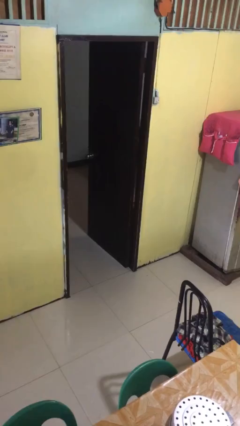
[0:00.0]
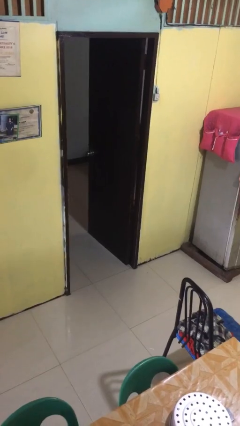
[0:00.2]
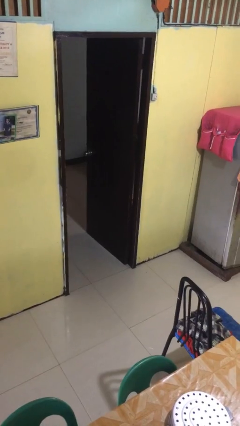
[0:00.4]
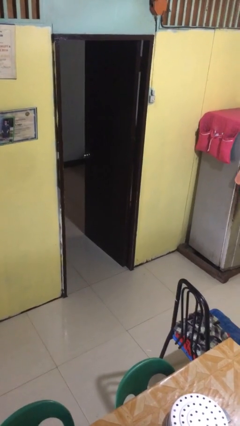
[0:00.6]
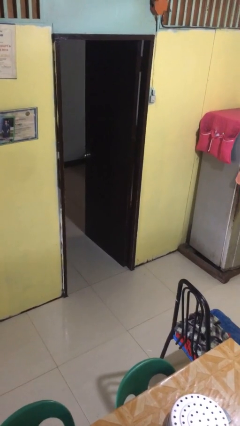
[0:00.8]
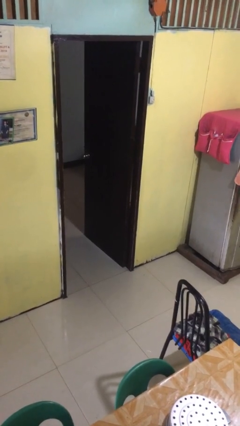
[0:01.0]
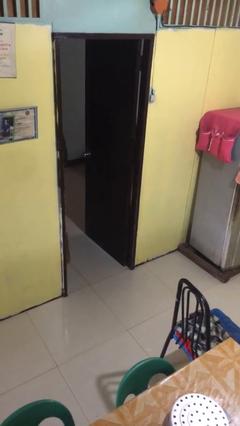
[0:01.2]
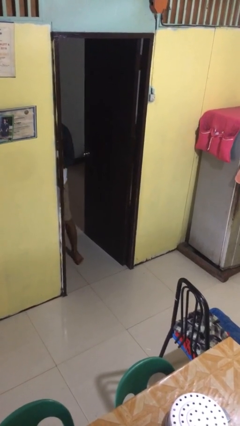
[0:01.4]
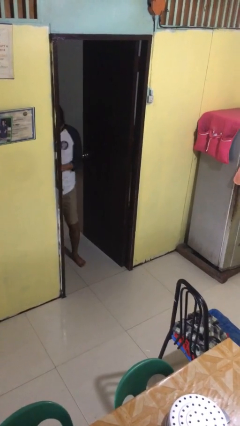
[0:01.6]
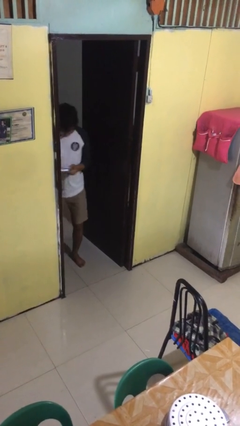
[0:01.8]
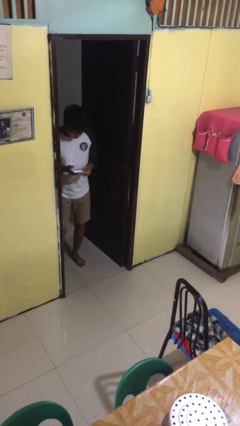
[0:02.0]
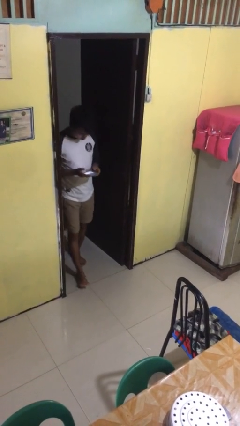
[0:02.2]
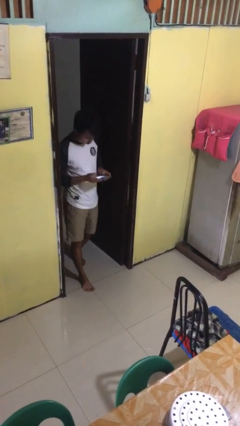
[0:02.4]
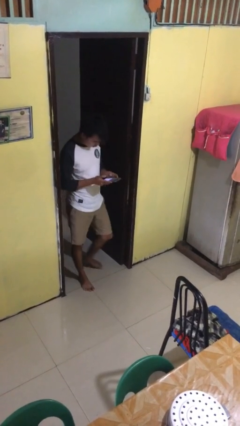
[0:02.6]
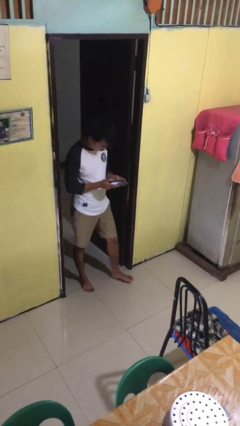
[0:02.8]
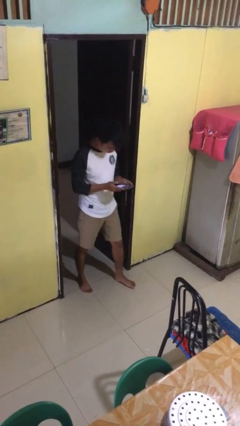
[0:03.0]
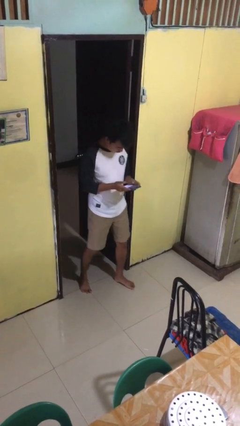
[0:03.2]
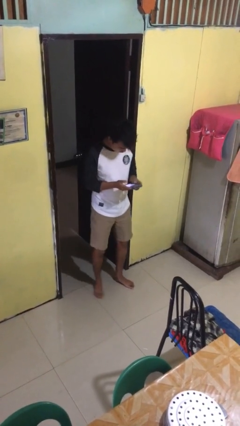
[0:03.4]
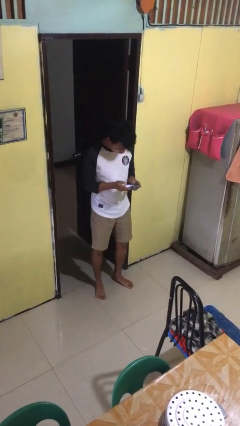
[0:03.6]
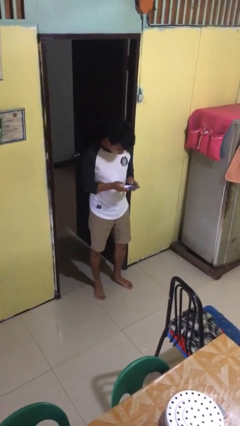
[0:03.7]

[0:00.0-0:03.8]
person enters scene through structure

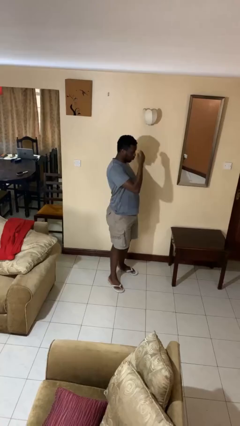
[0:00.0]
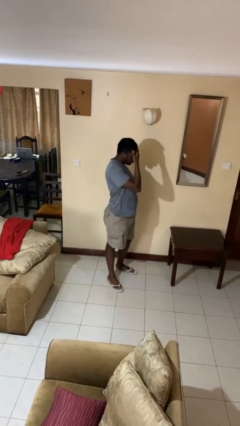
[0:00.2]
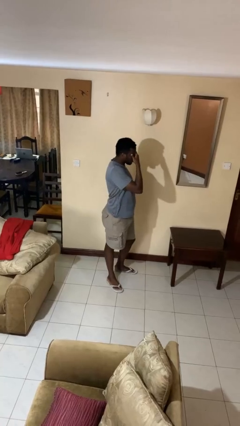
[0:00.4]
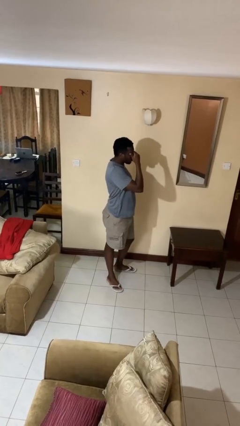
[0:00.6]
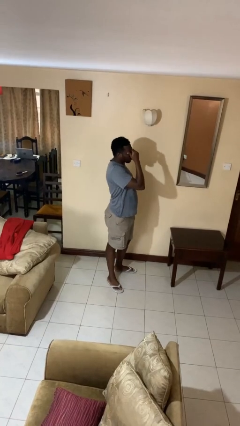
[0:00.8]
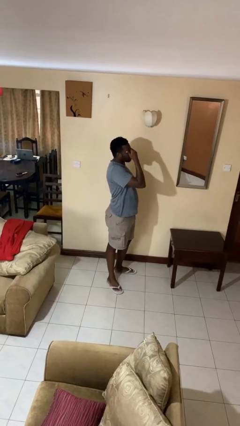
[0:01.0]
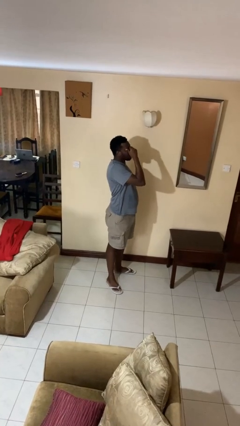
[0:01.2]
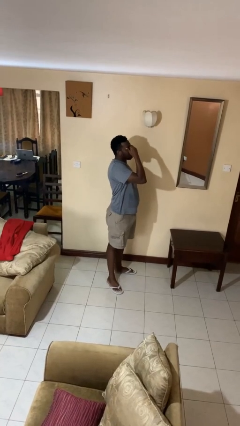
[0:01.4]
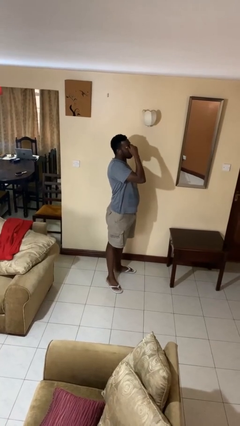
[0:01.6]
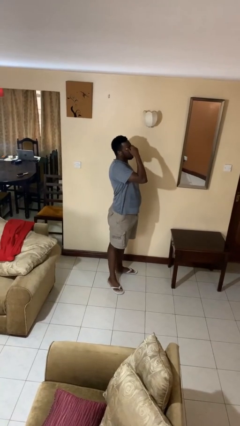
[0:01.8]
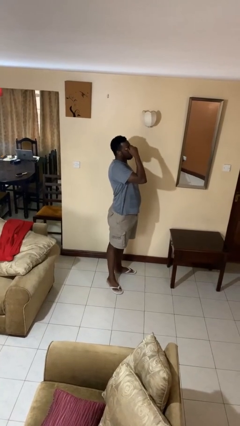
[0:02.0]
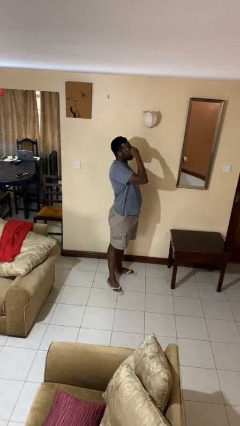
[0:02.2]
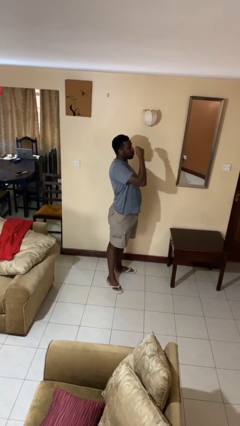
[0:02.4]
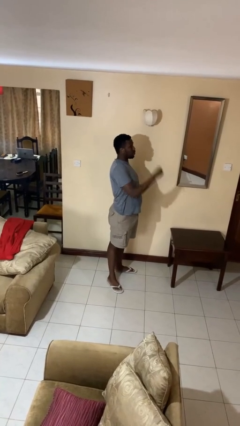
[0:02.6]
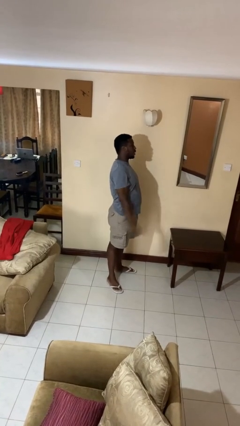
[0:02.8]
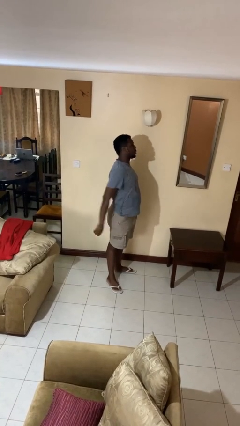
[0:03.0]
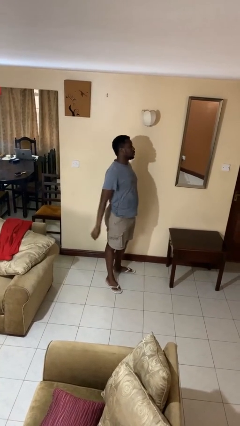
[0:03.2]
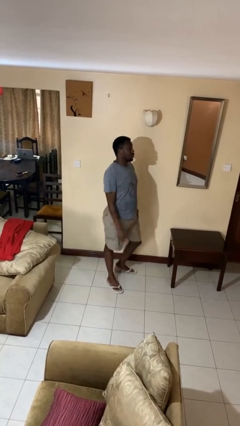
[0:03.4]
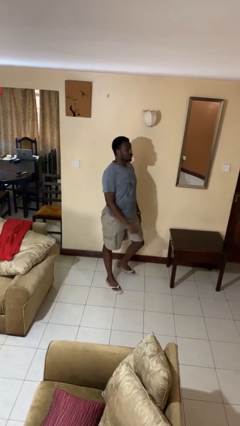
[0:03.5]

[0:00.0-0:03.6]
person rubs eyes

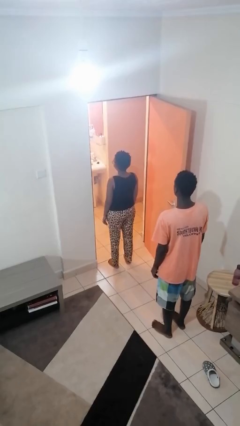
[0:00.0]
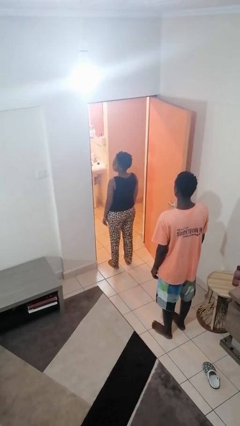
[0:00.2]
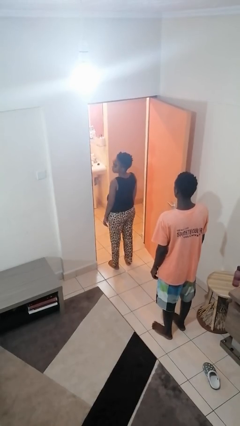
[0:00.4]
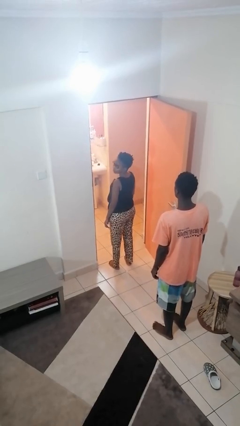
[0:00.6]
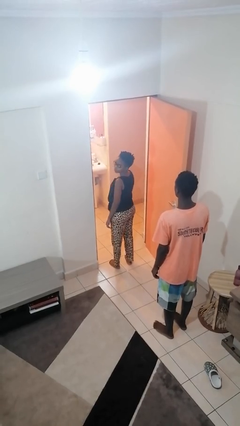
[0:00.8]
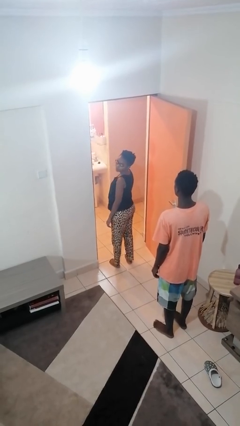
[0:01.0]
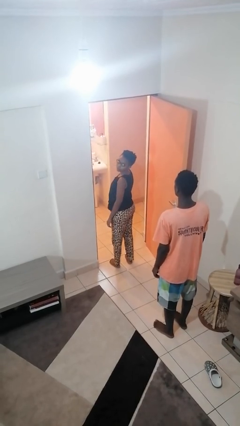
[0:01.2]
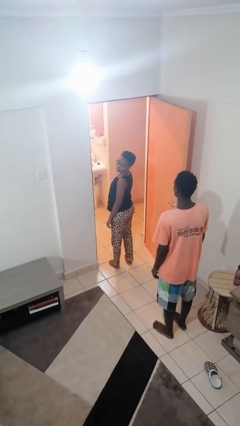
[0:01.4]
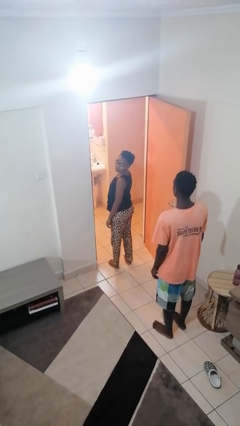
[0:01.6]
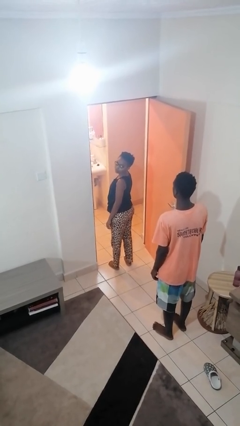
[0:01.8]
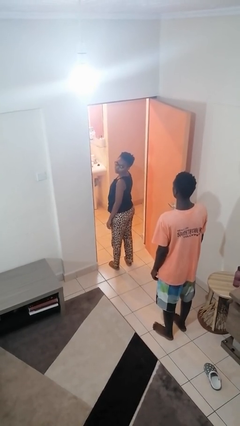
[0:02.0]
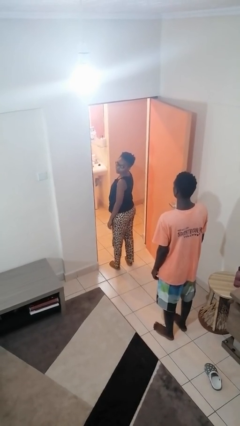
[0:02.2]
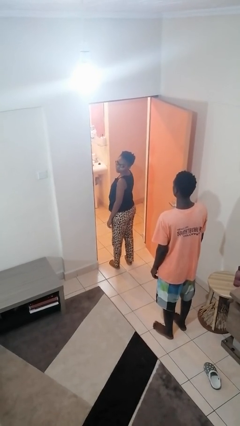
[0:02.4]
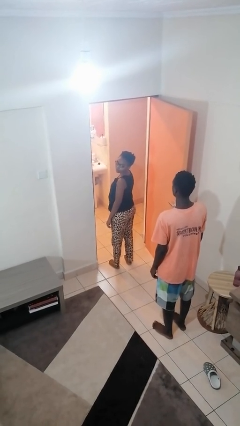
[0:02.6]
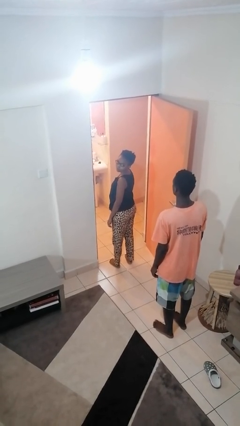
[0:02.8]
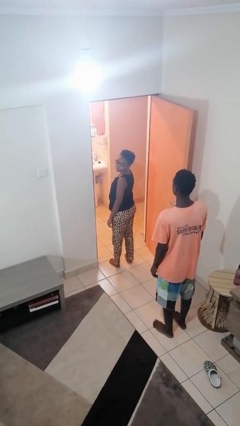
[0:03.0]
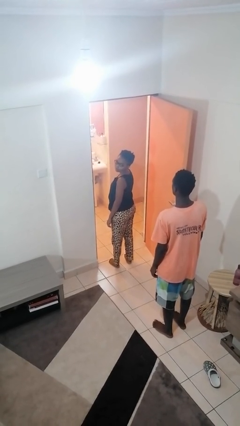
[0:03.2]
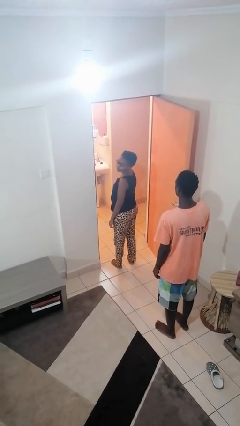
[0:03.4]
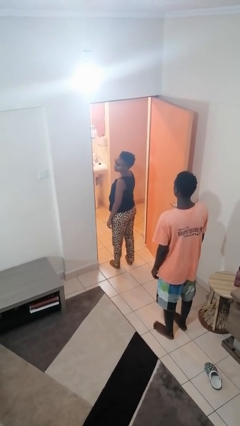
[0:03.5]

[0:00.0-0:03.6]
person looks over shoulder

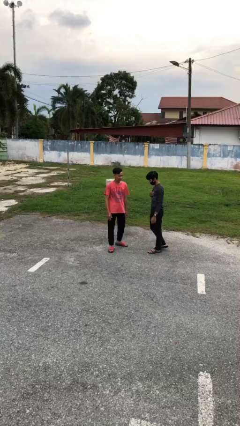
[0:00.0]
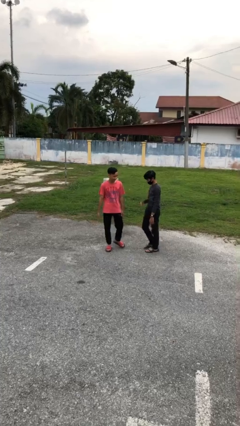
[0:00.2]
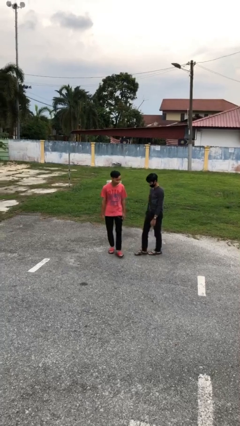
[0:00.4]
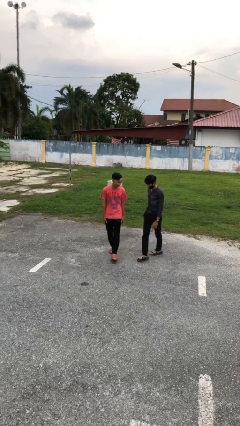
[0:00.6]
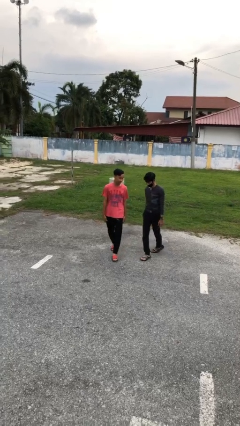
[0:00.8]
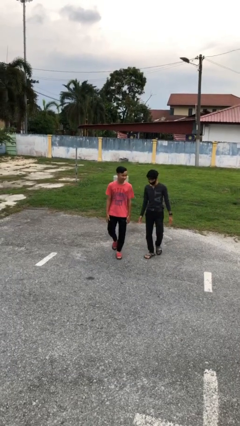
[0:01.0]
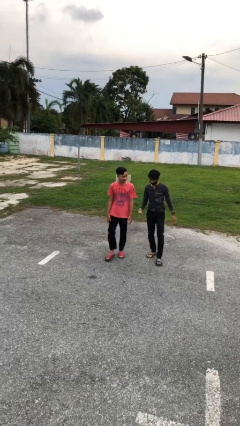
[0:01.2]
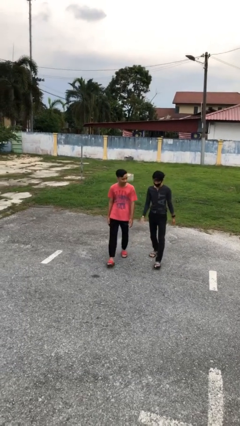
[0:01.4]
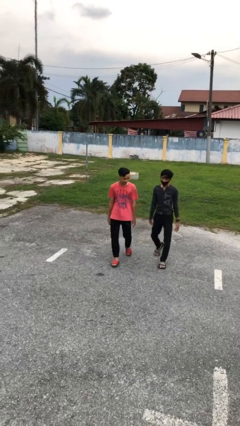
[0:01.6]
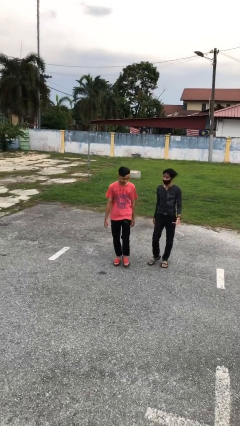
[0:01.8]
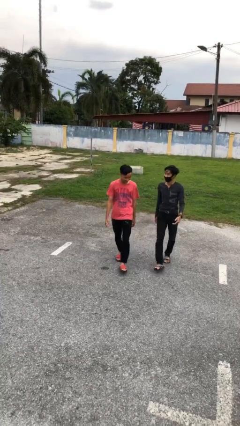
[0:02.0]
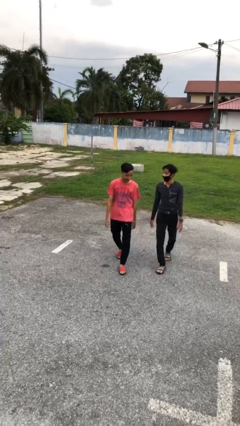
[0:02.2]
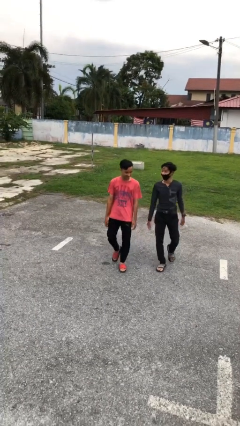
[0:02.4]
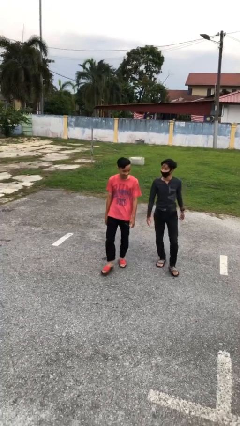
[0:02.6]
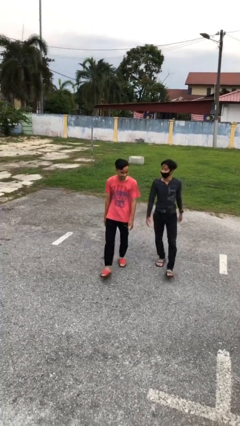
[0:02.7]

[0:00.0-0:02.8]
person talks to person

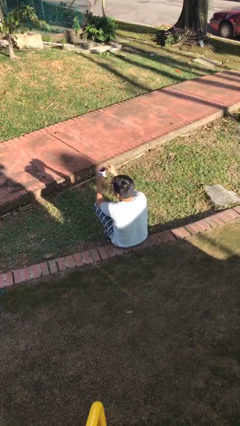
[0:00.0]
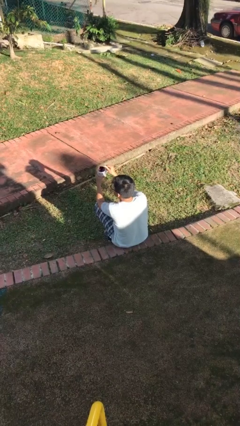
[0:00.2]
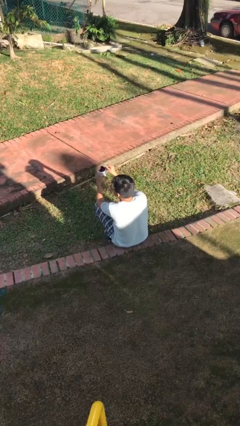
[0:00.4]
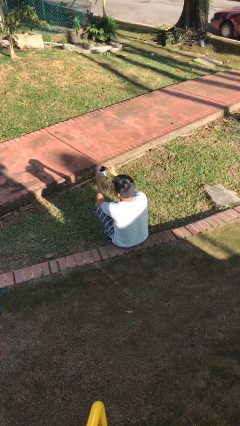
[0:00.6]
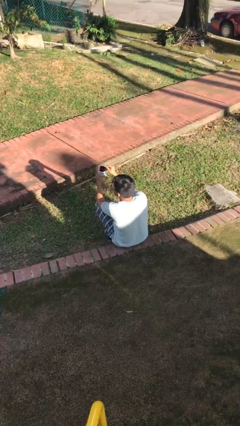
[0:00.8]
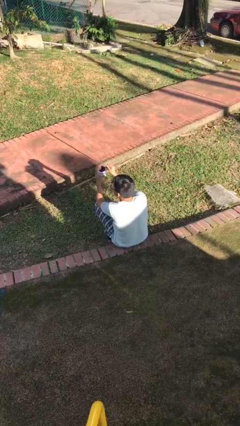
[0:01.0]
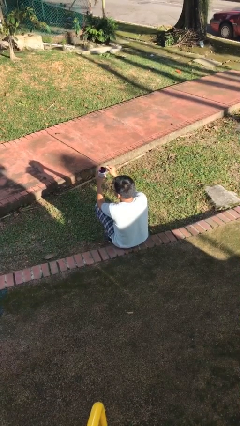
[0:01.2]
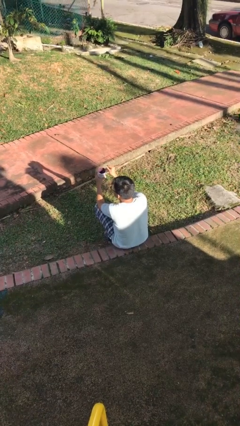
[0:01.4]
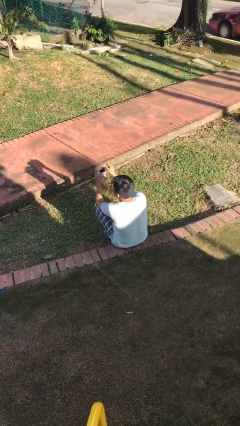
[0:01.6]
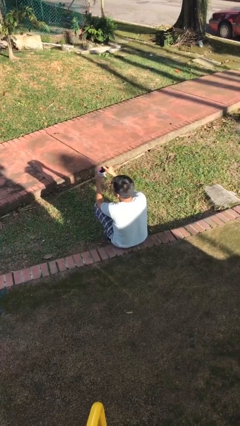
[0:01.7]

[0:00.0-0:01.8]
person stirs mug

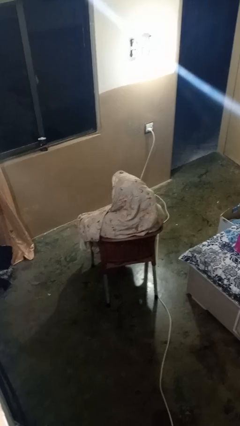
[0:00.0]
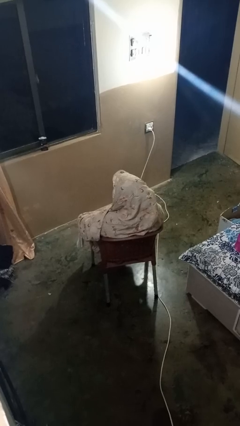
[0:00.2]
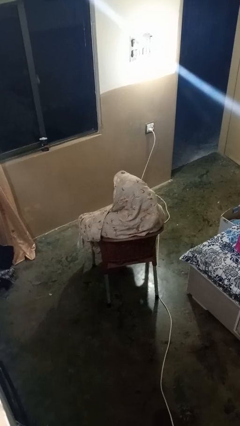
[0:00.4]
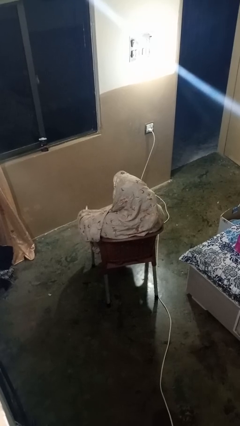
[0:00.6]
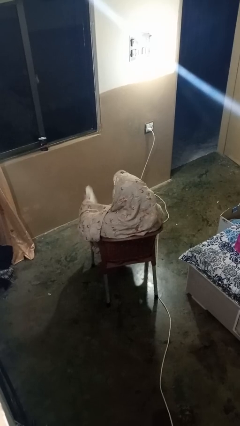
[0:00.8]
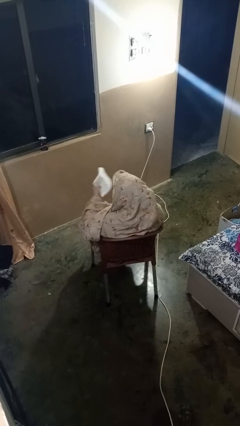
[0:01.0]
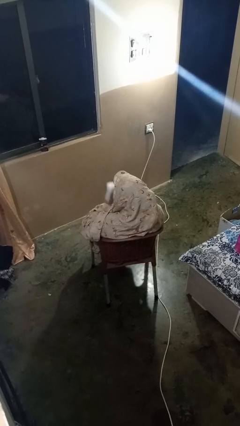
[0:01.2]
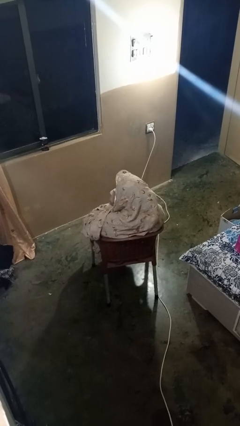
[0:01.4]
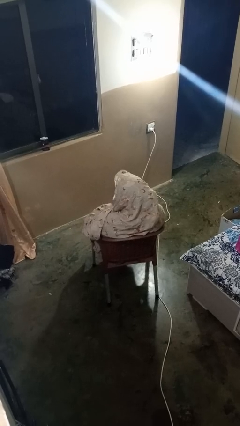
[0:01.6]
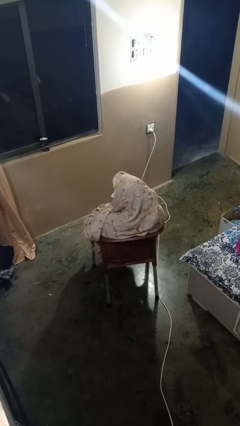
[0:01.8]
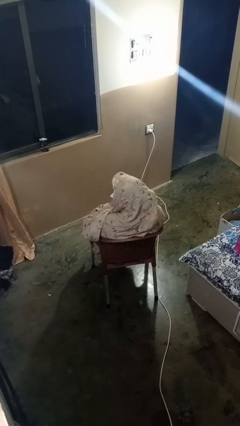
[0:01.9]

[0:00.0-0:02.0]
person wipes mouth with napkin
